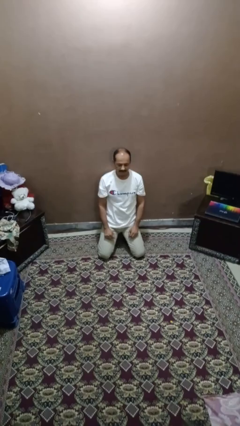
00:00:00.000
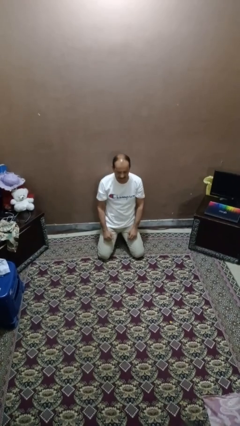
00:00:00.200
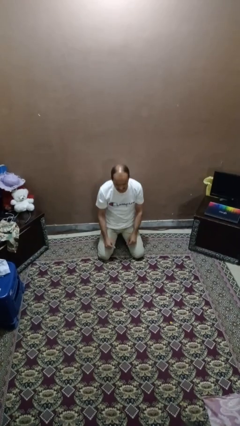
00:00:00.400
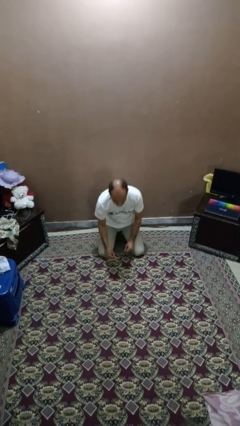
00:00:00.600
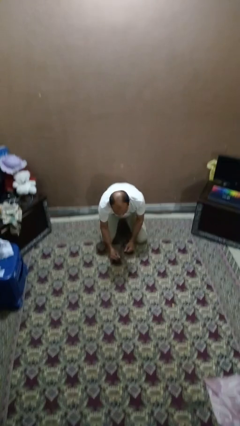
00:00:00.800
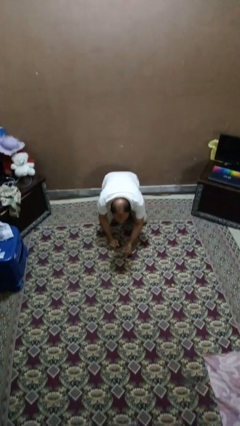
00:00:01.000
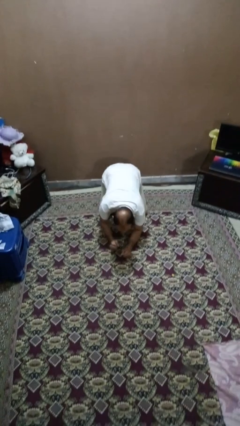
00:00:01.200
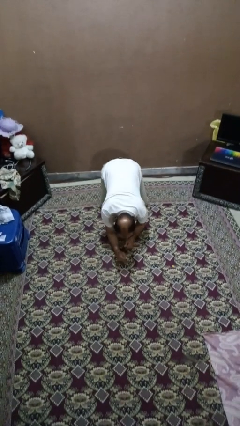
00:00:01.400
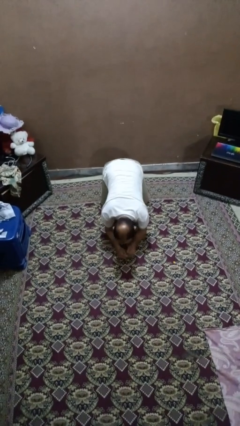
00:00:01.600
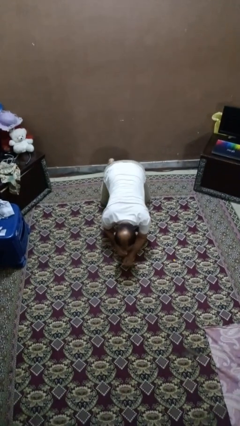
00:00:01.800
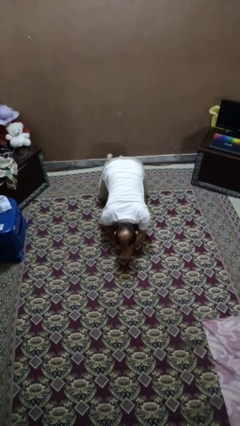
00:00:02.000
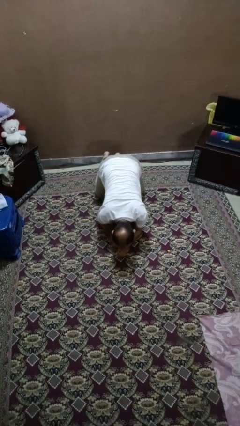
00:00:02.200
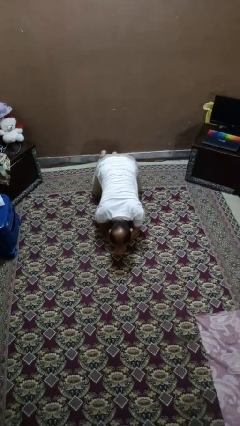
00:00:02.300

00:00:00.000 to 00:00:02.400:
person crawls

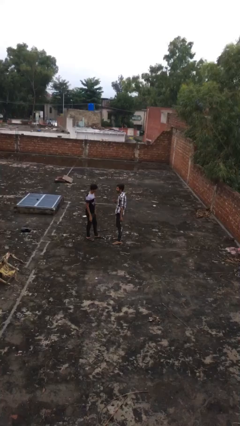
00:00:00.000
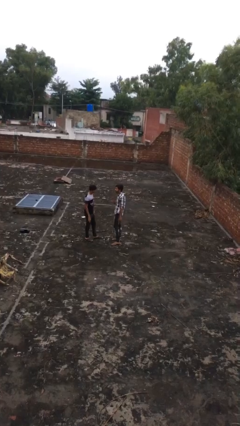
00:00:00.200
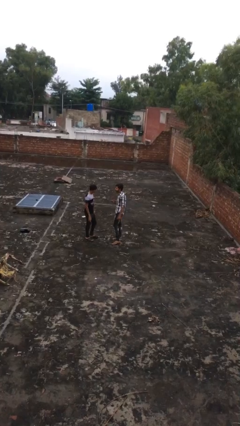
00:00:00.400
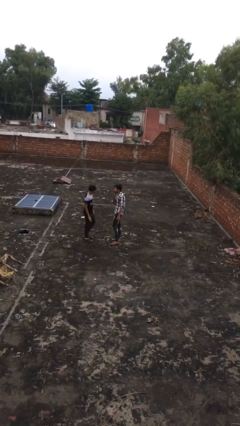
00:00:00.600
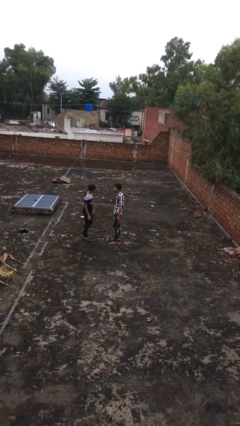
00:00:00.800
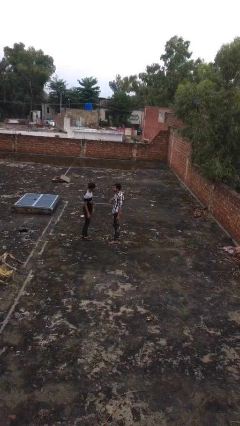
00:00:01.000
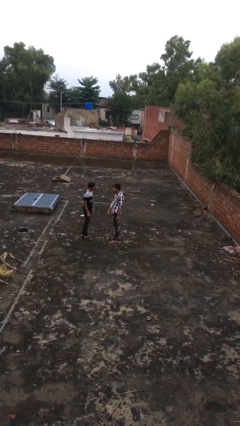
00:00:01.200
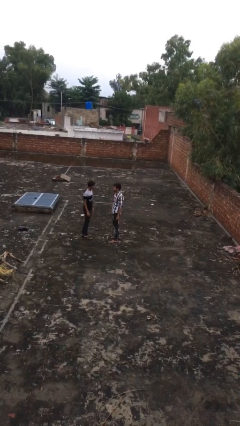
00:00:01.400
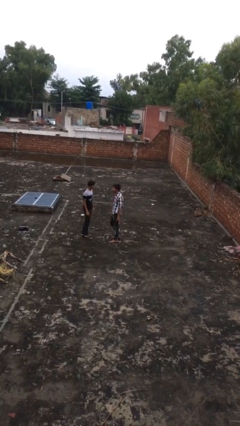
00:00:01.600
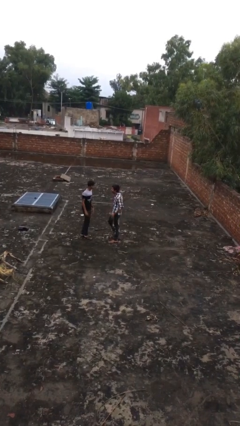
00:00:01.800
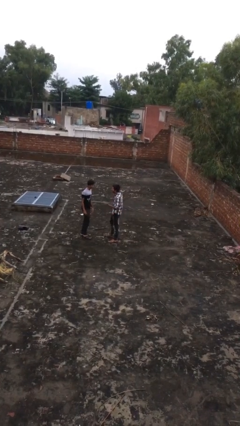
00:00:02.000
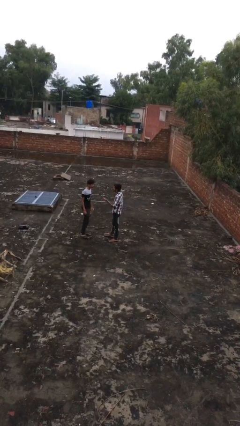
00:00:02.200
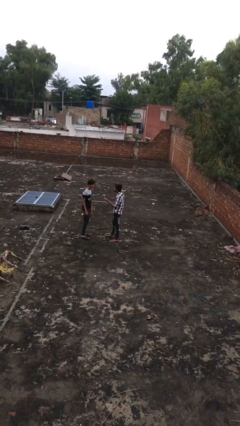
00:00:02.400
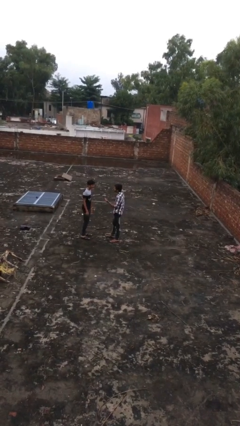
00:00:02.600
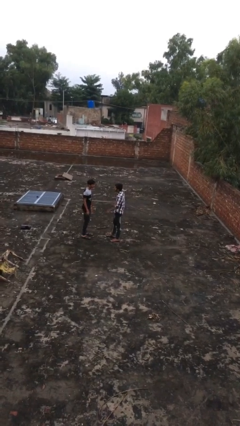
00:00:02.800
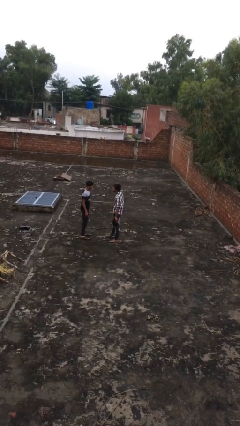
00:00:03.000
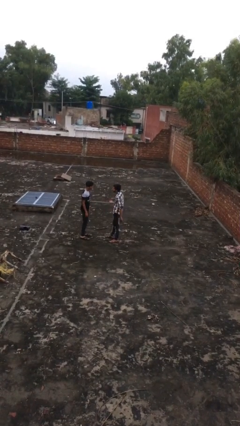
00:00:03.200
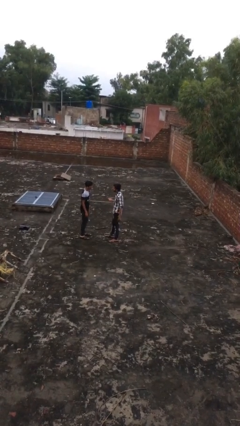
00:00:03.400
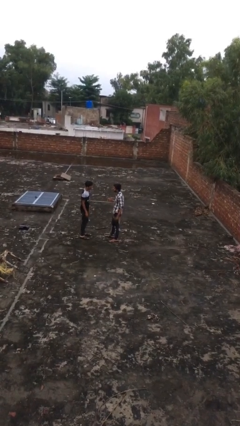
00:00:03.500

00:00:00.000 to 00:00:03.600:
person talks to person

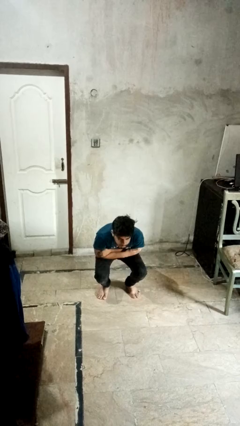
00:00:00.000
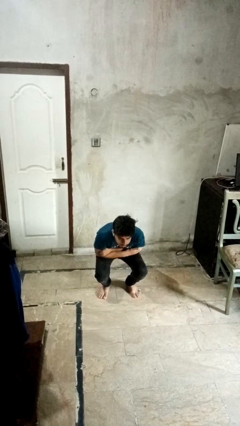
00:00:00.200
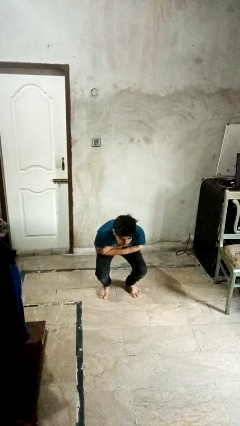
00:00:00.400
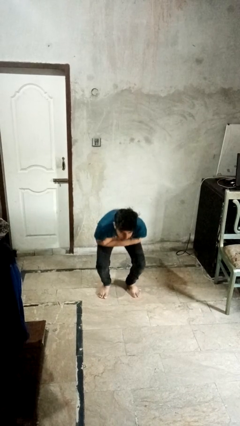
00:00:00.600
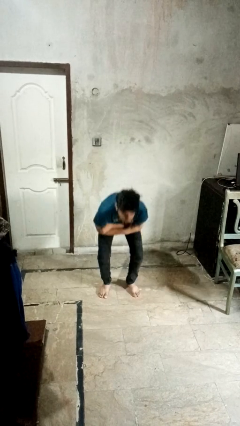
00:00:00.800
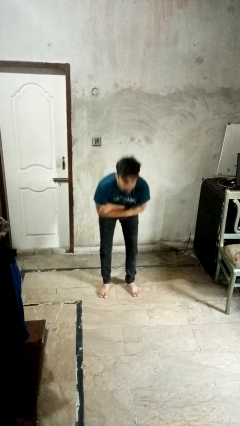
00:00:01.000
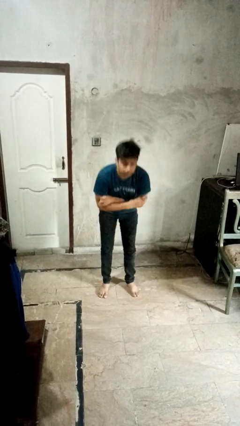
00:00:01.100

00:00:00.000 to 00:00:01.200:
person stands up

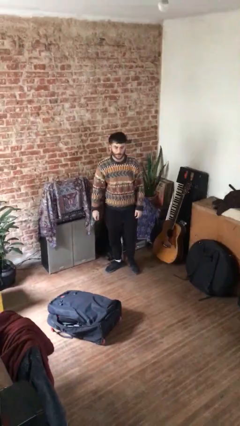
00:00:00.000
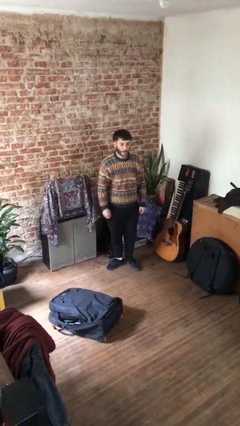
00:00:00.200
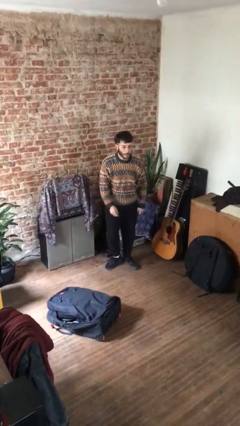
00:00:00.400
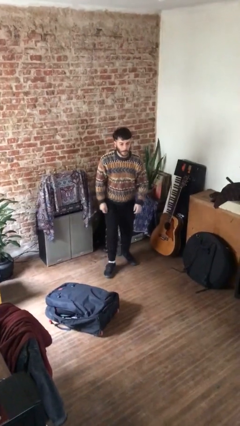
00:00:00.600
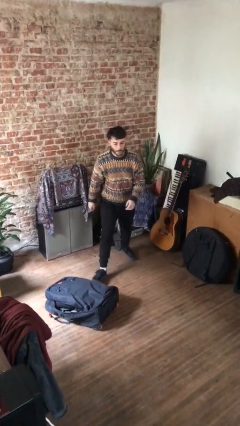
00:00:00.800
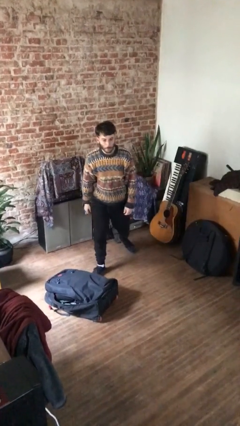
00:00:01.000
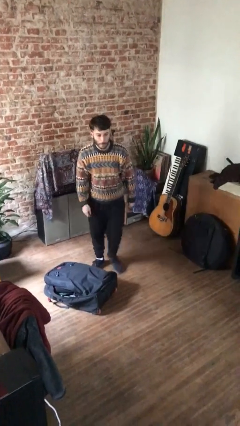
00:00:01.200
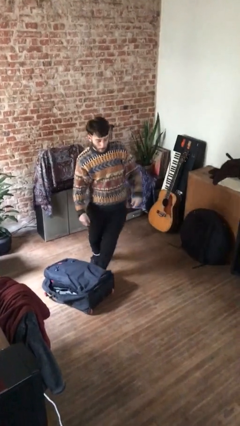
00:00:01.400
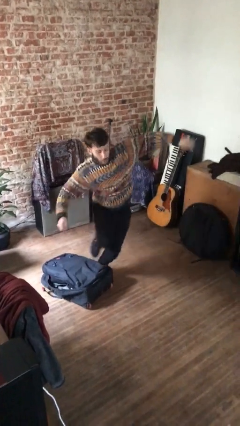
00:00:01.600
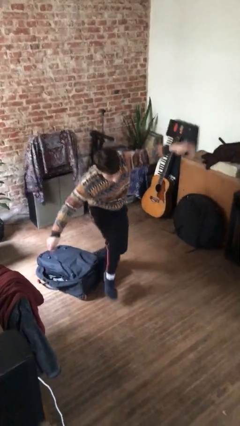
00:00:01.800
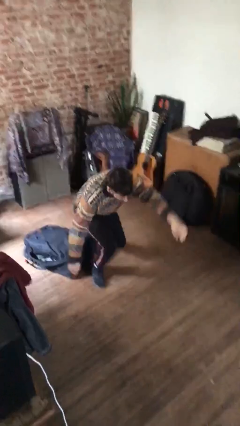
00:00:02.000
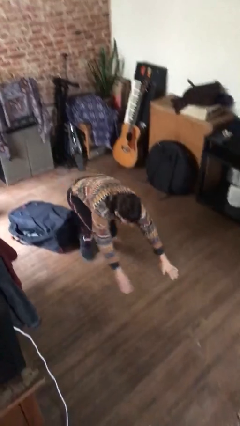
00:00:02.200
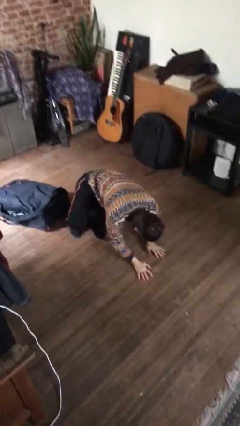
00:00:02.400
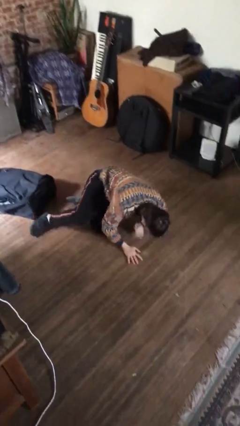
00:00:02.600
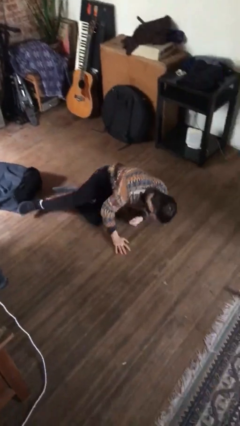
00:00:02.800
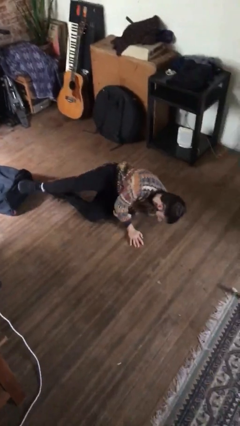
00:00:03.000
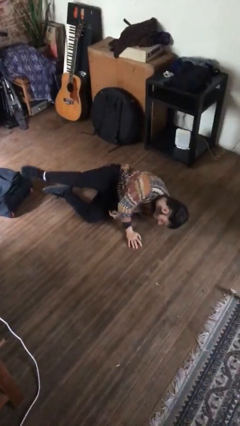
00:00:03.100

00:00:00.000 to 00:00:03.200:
person trips on object on floor

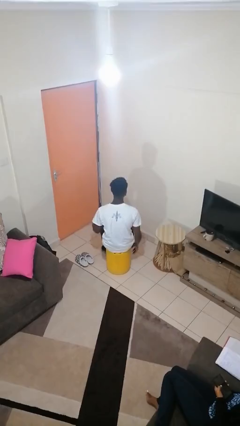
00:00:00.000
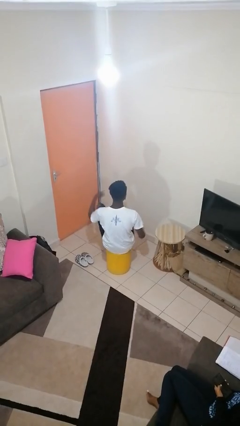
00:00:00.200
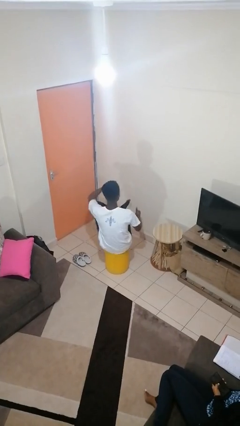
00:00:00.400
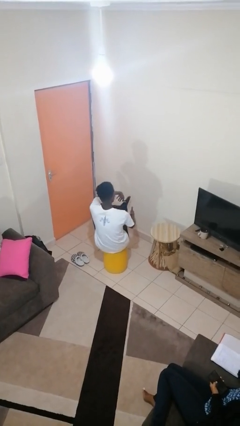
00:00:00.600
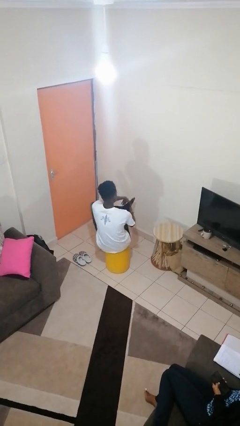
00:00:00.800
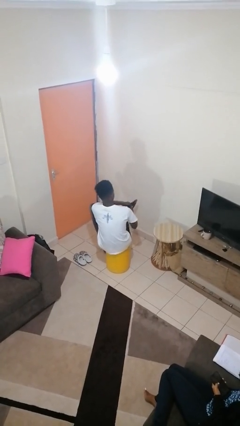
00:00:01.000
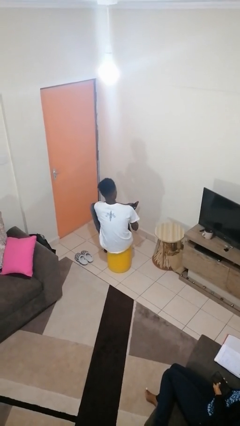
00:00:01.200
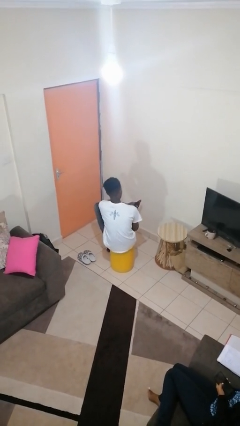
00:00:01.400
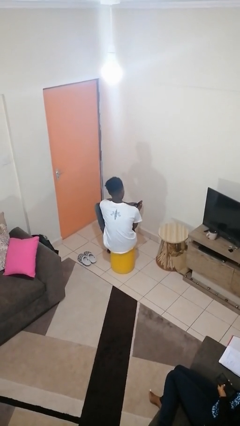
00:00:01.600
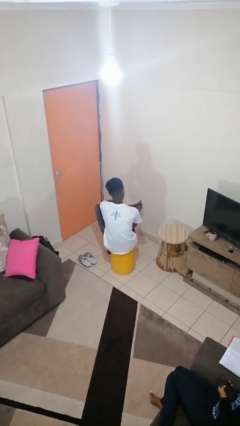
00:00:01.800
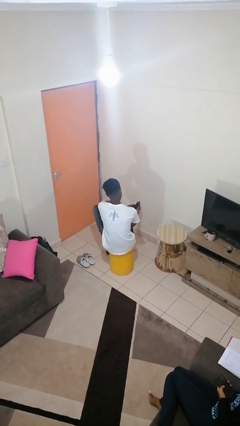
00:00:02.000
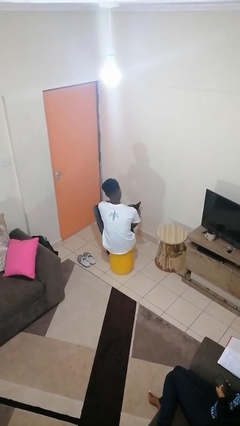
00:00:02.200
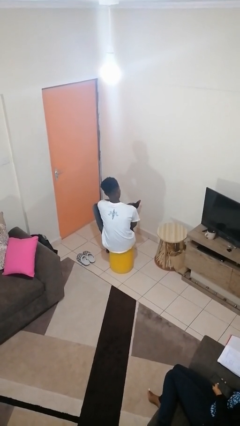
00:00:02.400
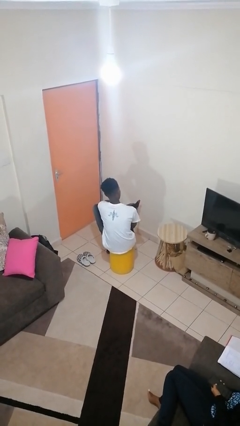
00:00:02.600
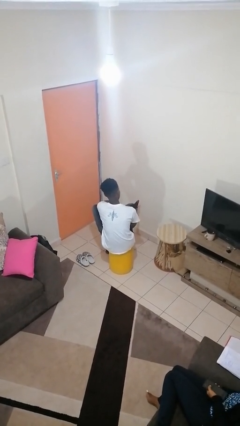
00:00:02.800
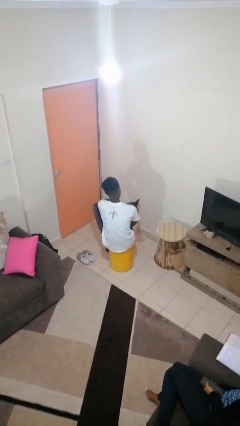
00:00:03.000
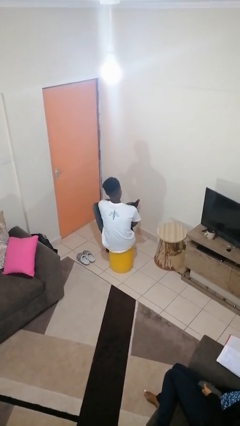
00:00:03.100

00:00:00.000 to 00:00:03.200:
person rubs foot

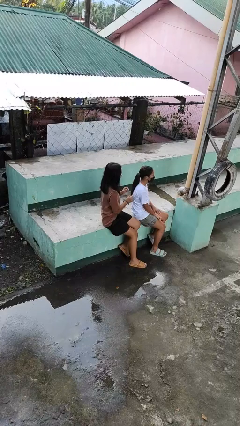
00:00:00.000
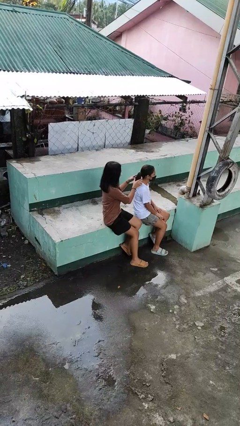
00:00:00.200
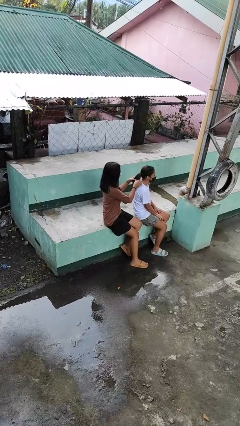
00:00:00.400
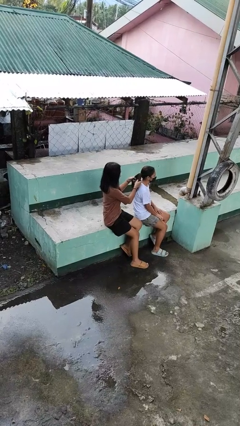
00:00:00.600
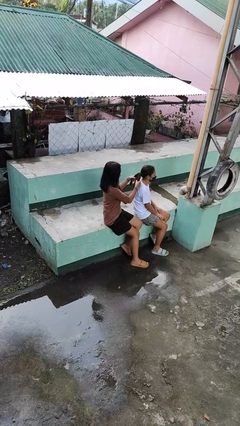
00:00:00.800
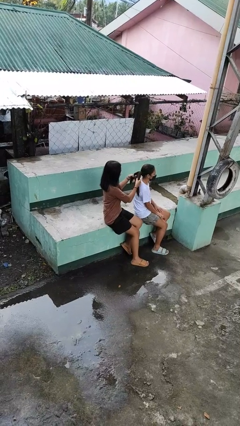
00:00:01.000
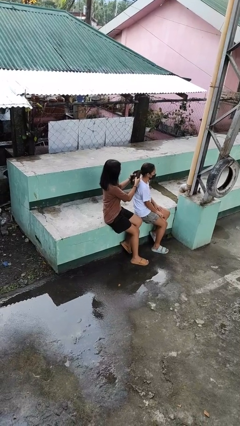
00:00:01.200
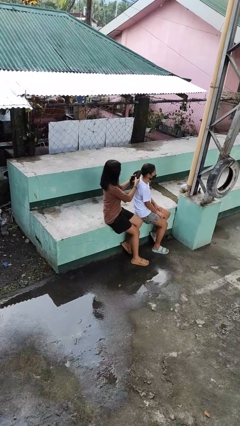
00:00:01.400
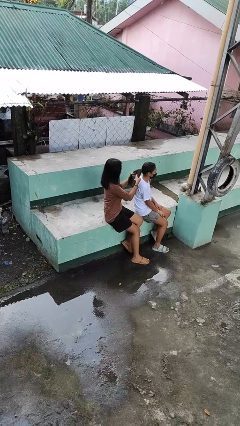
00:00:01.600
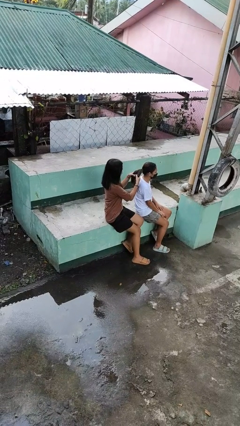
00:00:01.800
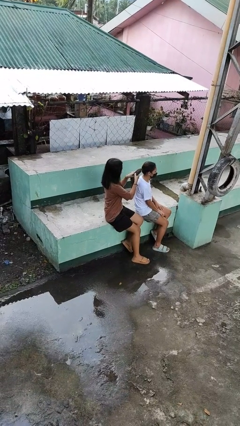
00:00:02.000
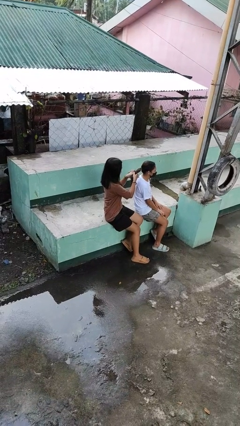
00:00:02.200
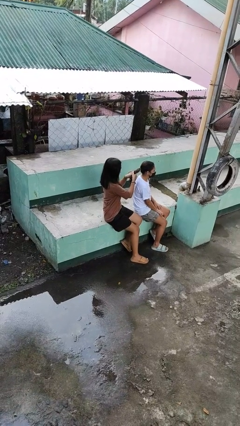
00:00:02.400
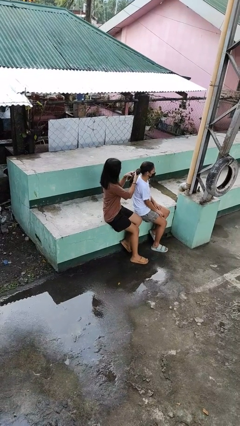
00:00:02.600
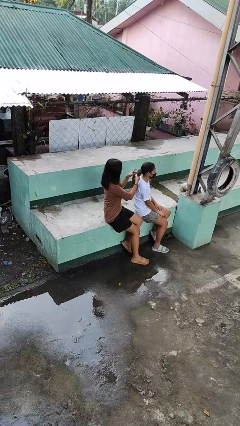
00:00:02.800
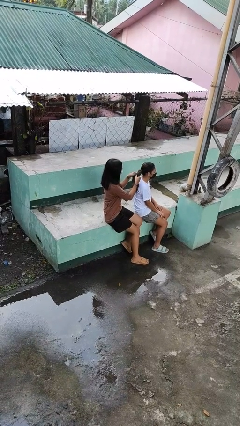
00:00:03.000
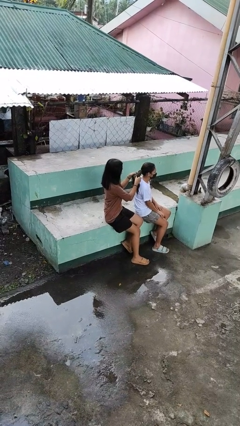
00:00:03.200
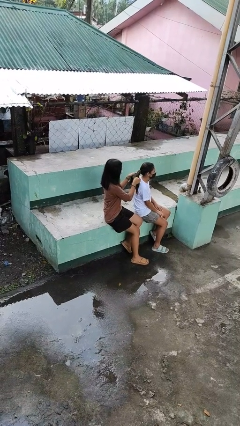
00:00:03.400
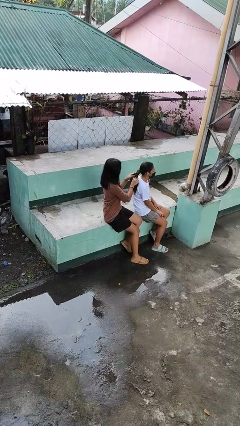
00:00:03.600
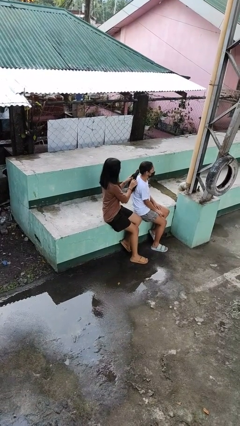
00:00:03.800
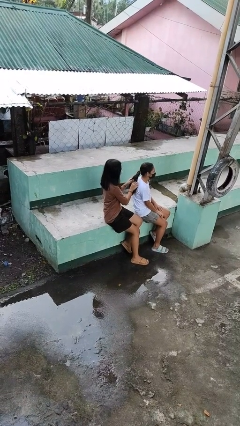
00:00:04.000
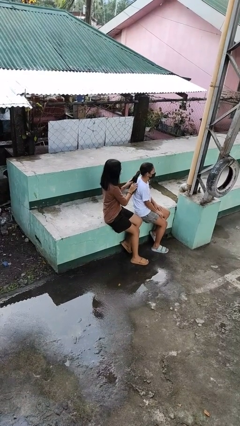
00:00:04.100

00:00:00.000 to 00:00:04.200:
person braids hair of person
